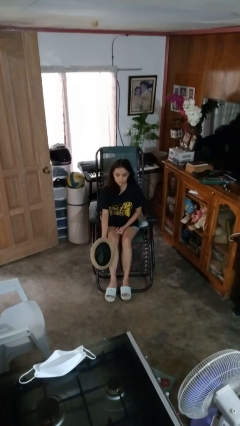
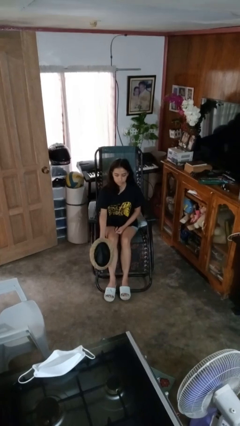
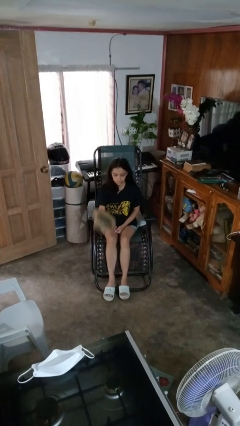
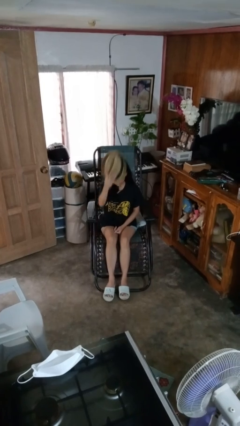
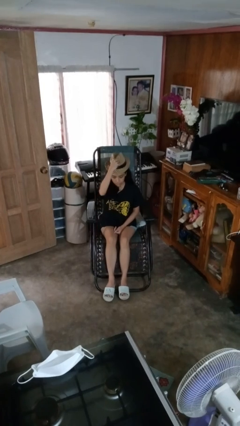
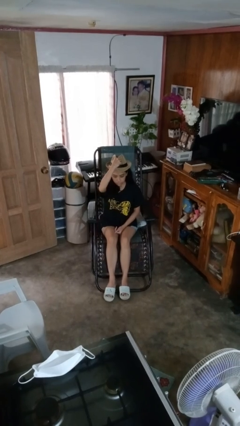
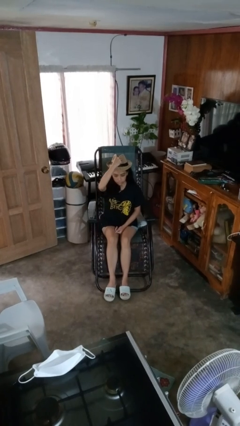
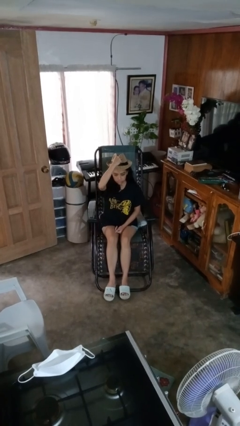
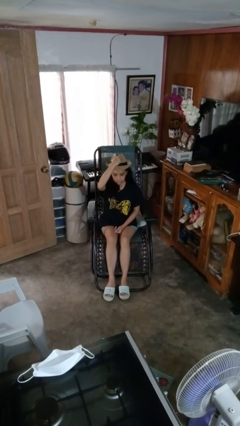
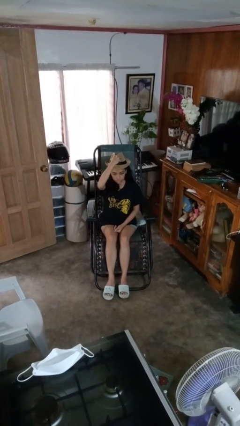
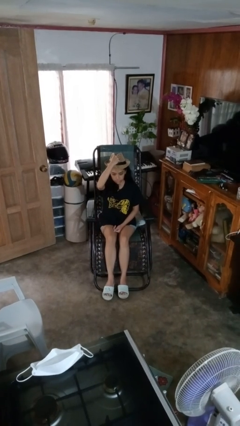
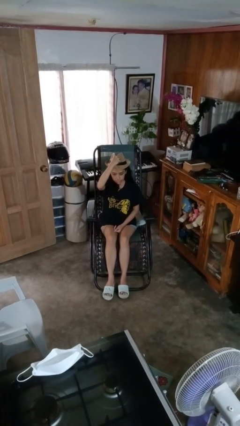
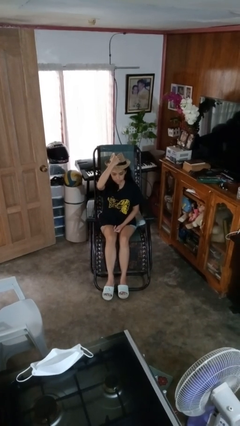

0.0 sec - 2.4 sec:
person puts on hat

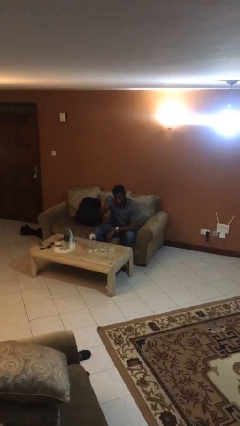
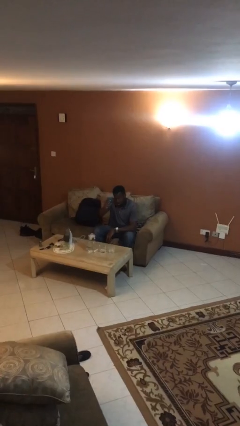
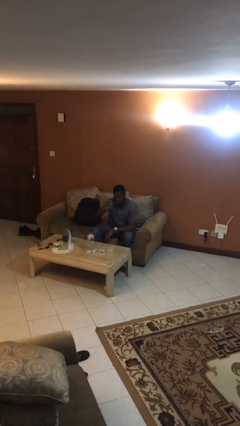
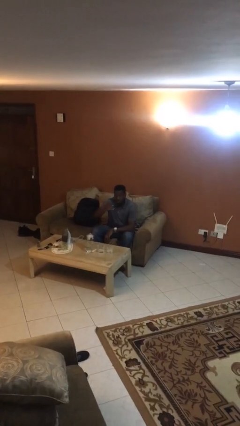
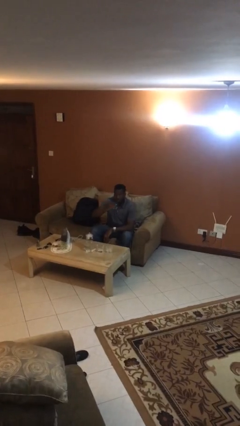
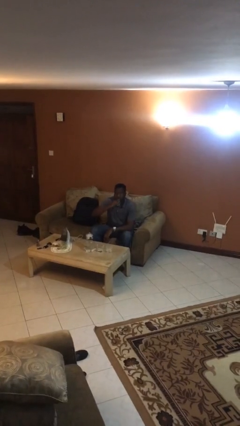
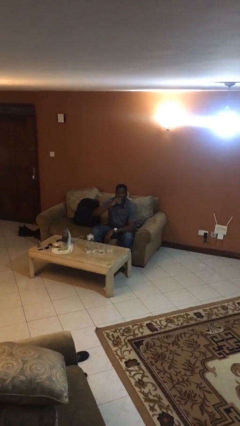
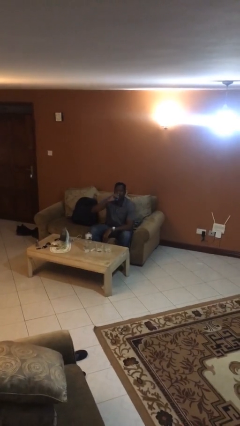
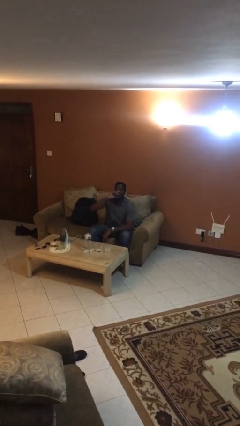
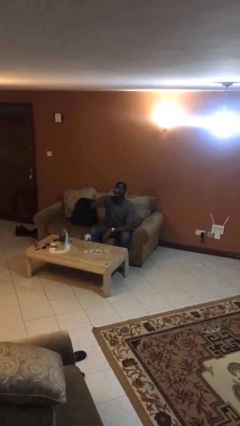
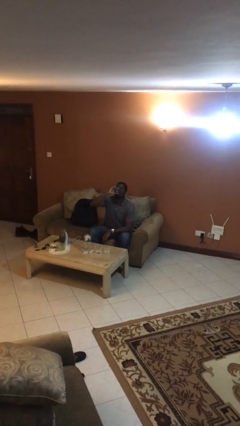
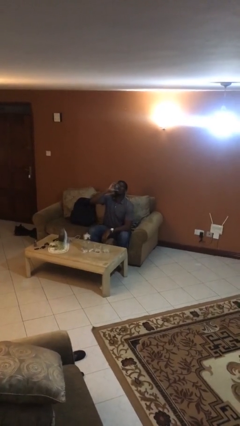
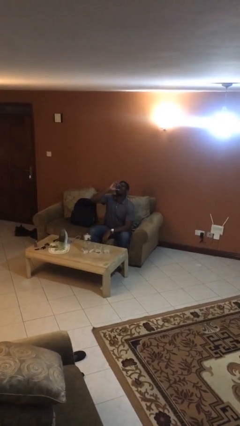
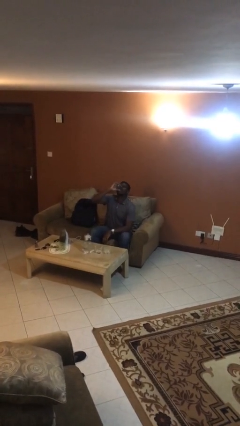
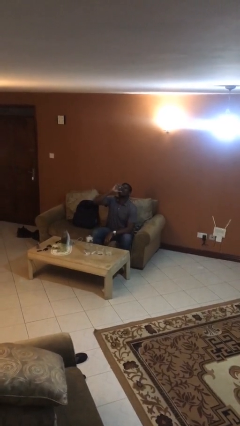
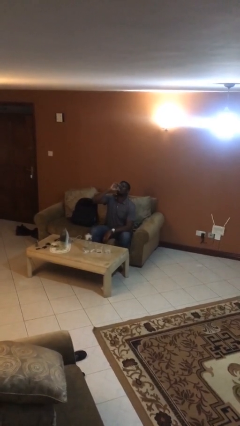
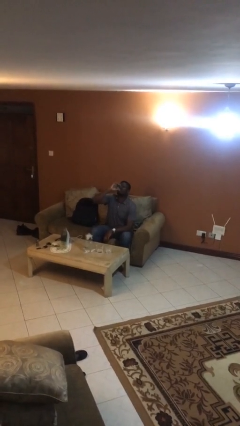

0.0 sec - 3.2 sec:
person drinks from shotglass

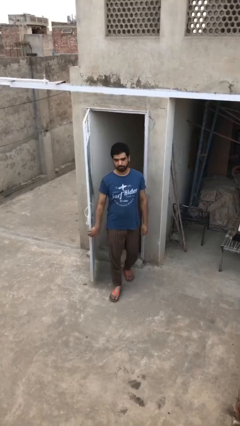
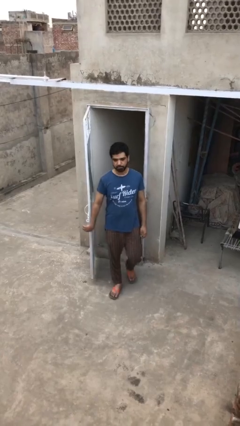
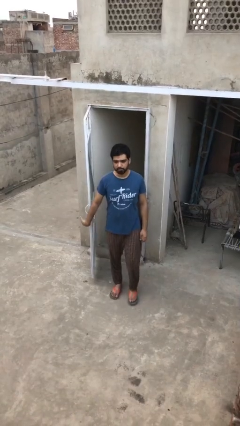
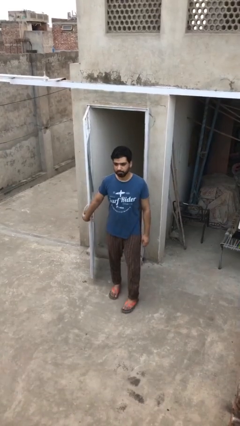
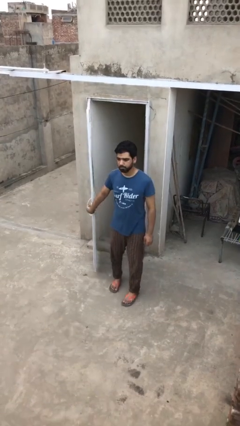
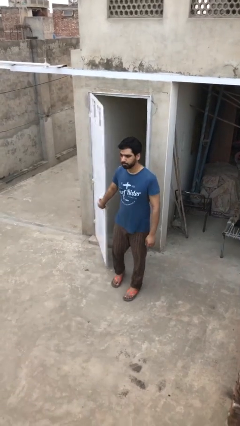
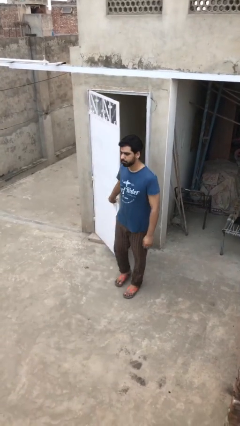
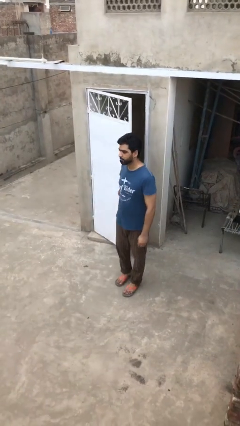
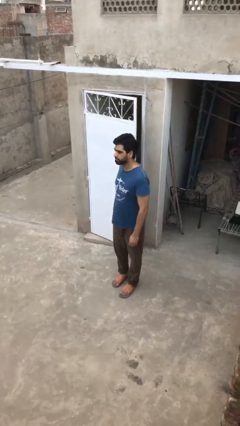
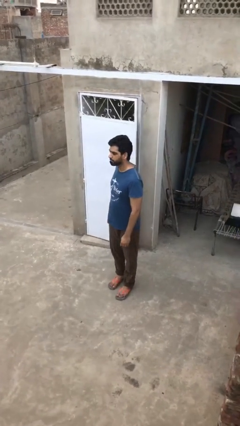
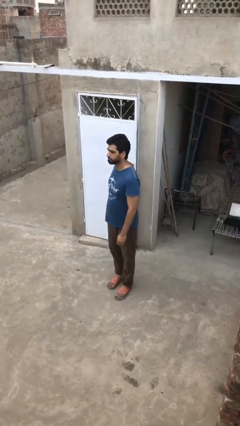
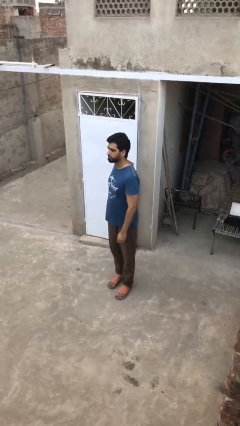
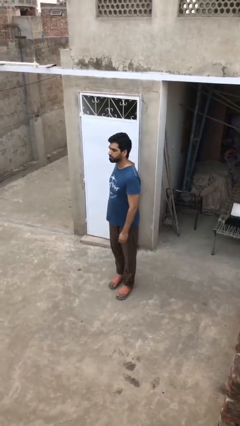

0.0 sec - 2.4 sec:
person closes facility door

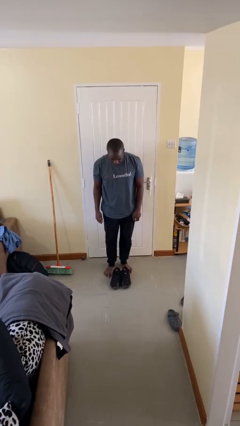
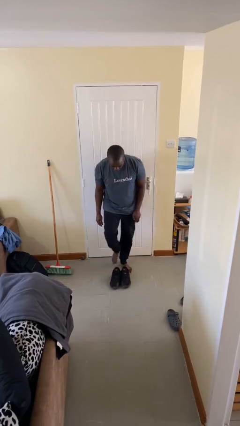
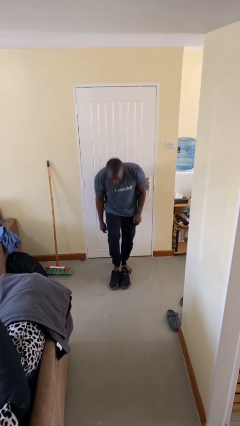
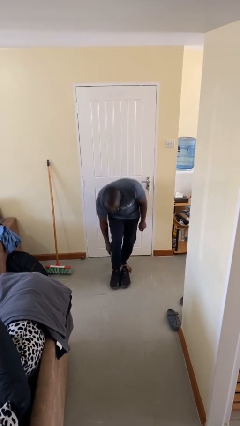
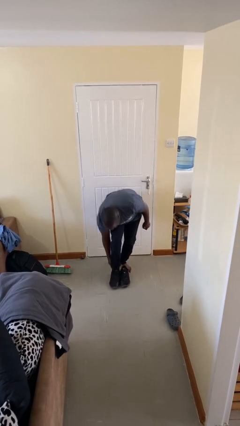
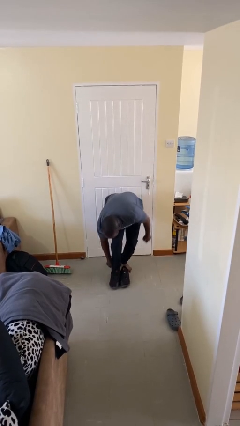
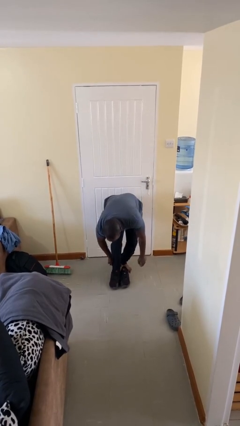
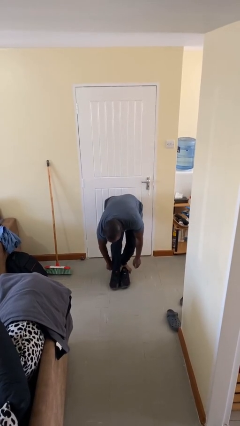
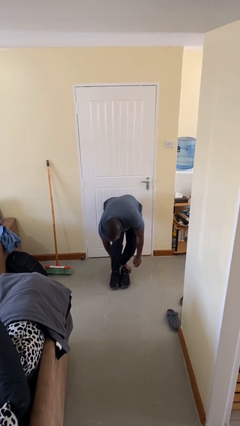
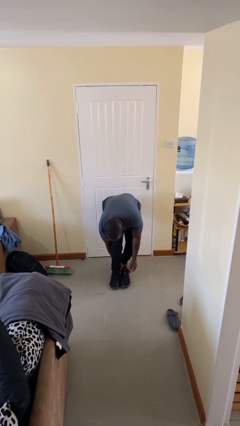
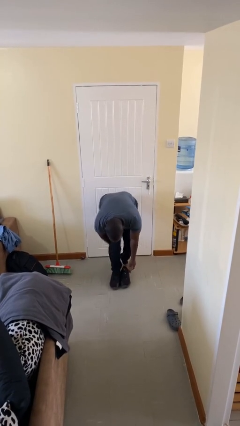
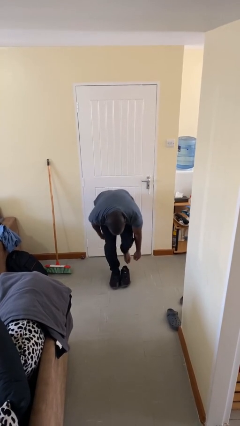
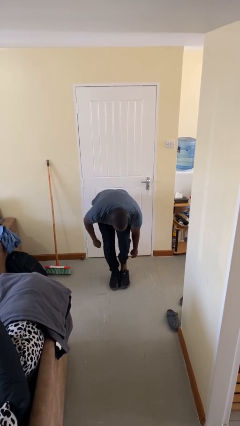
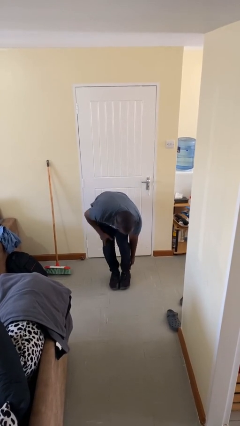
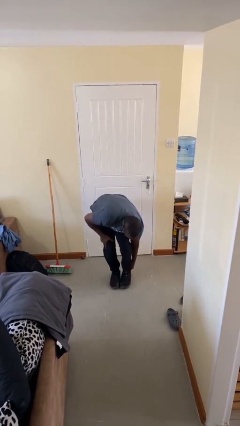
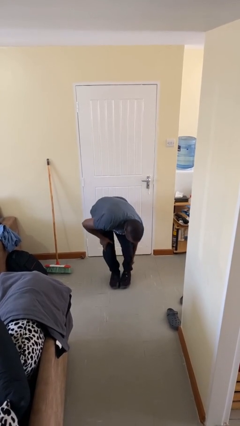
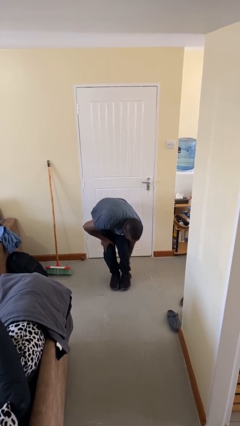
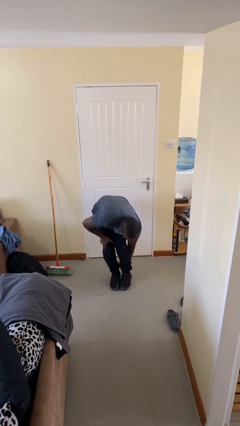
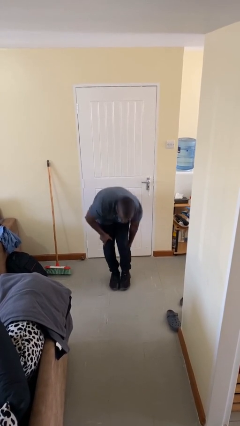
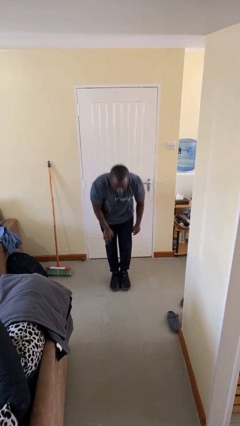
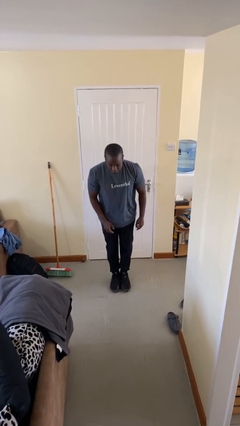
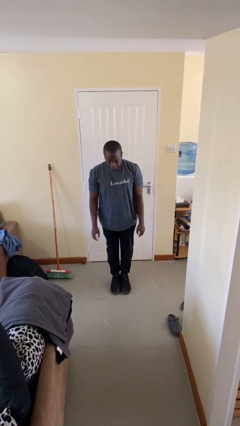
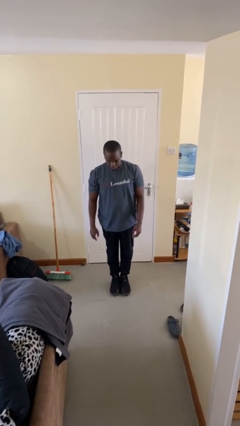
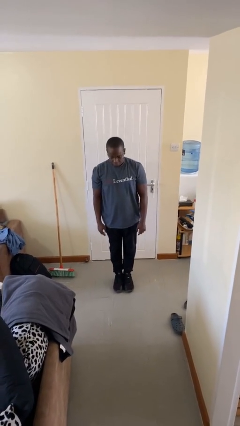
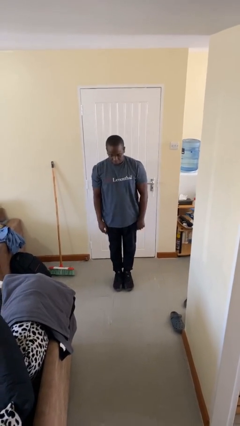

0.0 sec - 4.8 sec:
person puts on shoes

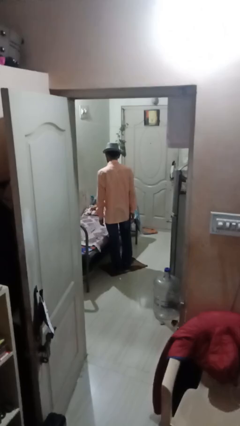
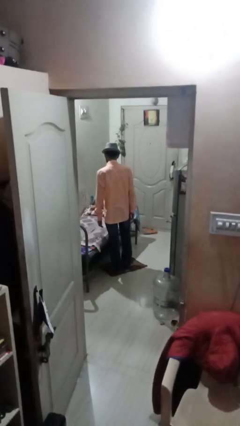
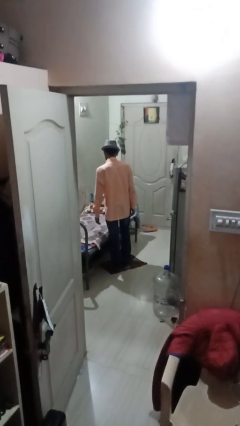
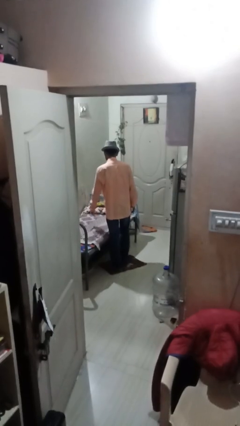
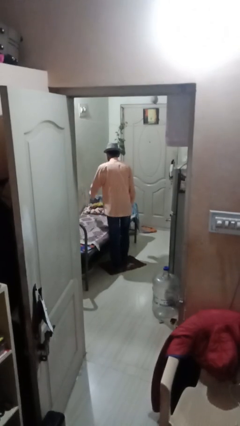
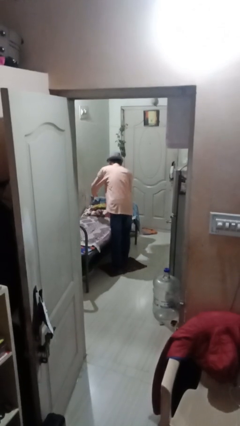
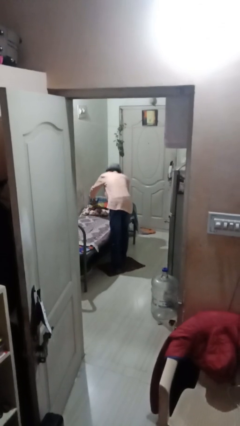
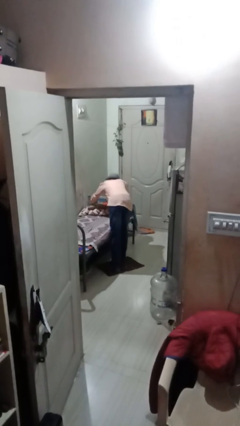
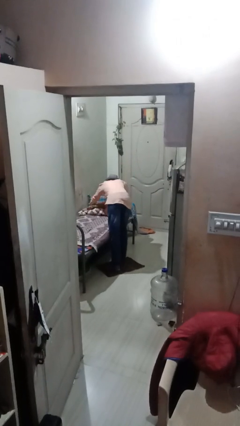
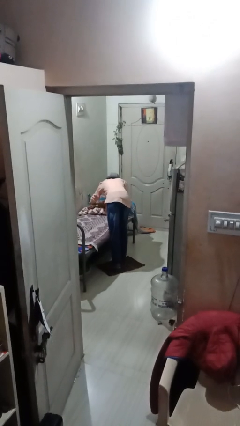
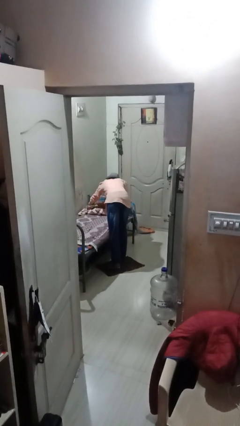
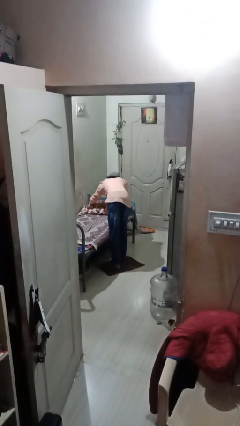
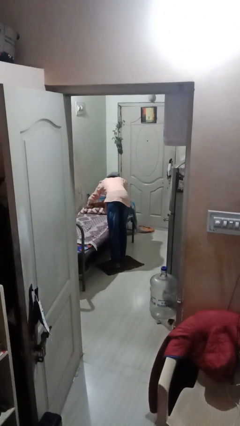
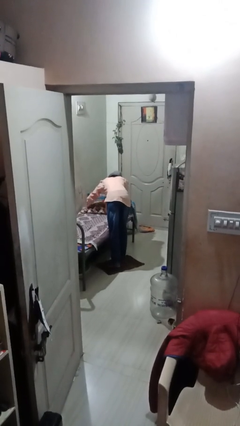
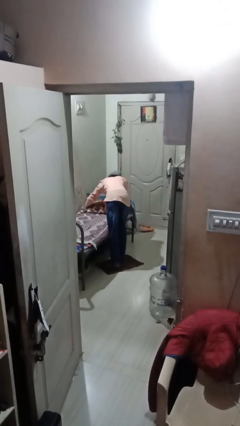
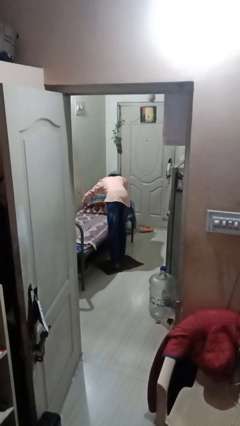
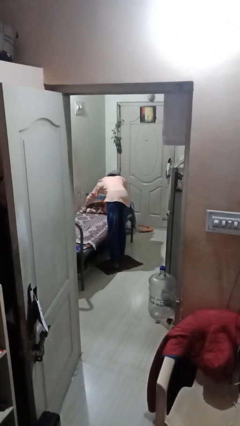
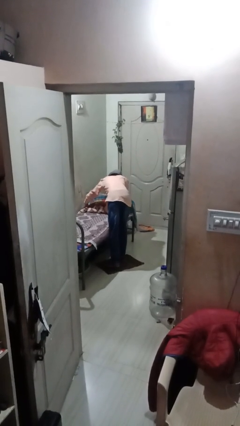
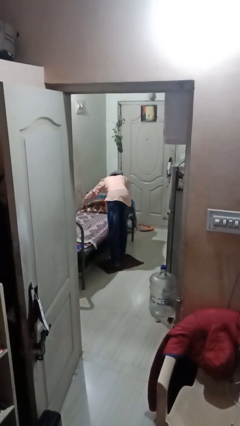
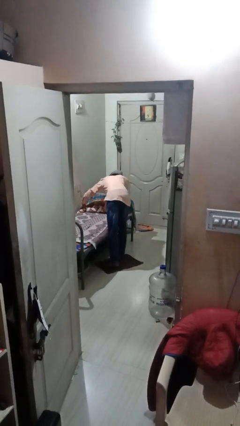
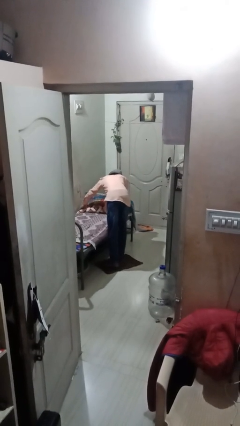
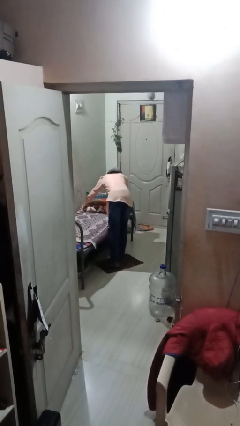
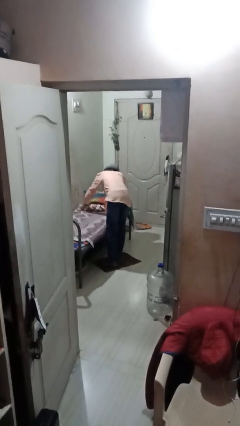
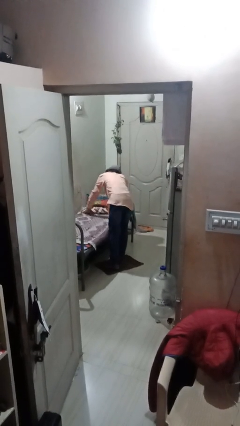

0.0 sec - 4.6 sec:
person makes bed
